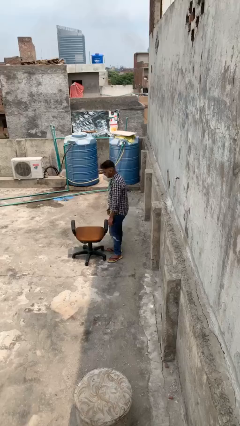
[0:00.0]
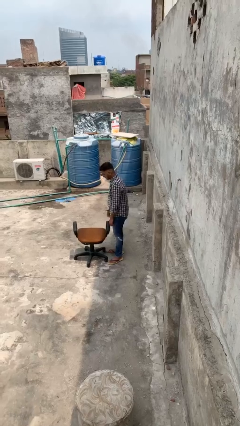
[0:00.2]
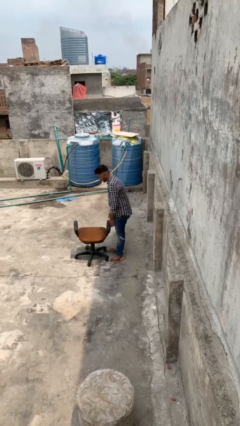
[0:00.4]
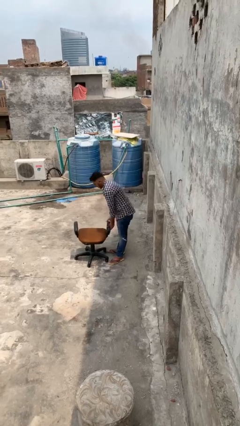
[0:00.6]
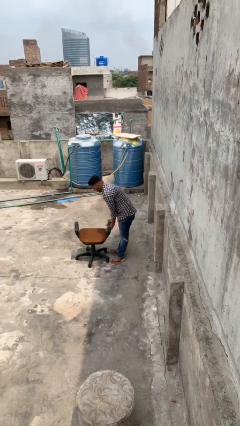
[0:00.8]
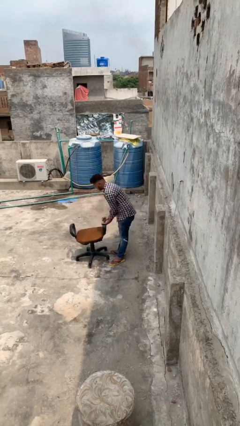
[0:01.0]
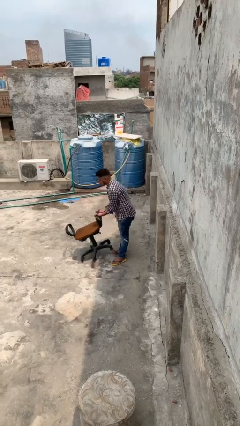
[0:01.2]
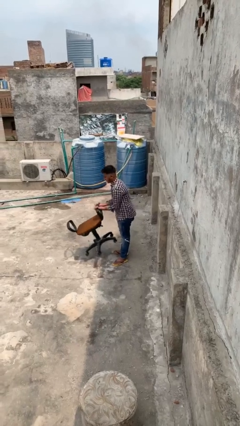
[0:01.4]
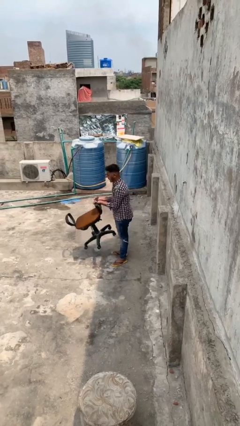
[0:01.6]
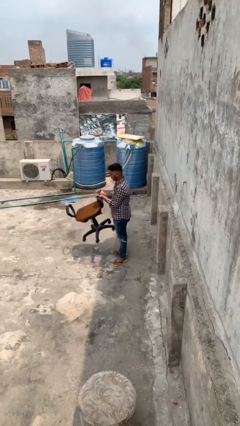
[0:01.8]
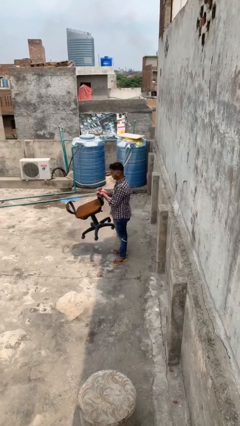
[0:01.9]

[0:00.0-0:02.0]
person picks up object from floor

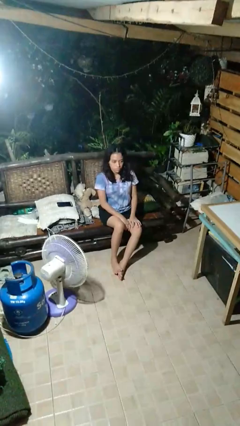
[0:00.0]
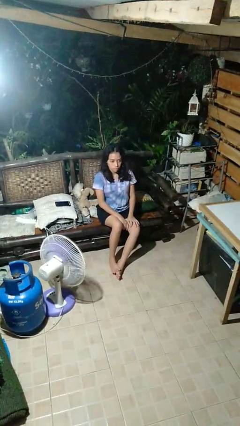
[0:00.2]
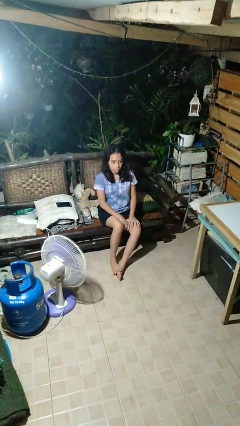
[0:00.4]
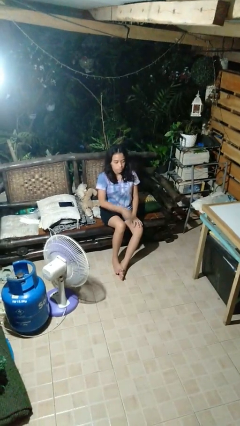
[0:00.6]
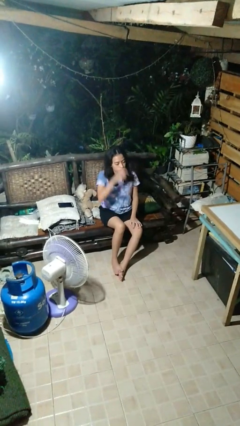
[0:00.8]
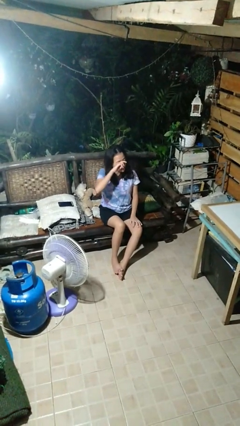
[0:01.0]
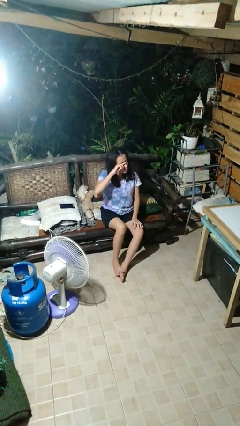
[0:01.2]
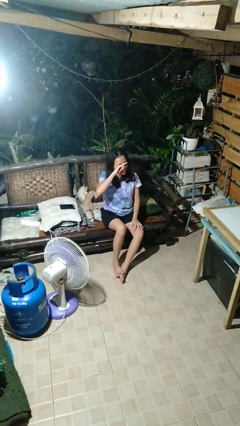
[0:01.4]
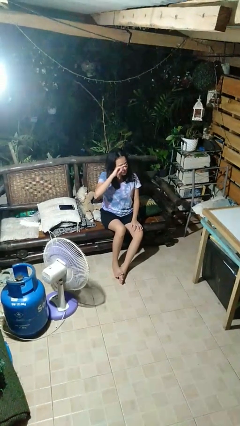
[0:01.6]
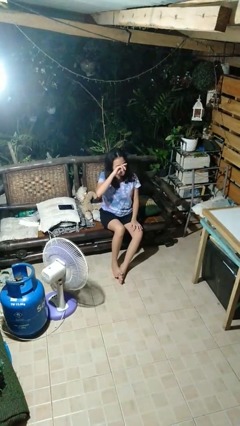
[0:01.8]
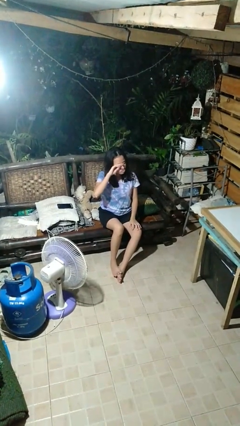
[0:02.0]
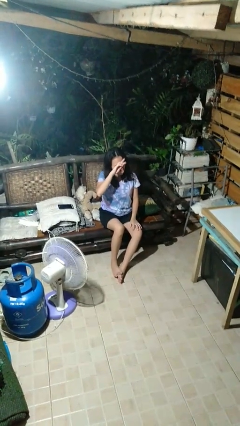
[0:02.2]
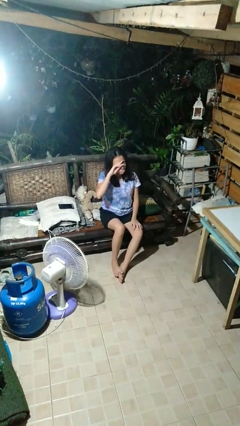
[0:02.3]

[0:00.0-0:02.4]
person rubs eyes

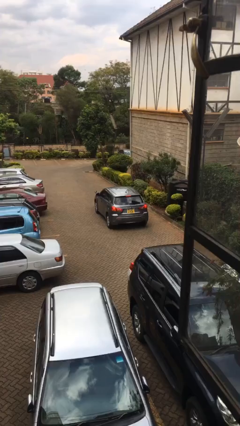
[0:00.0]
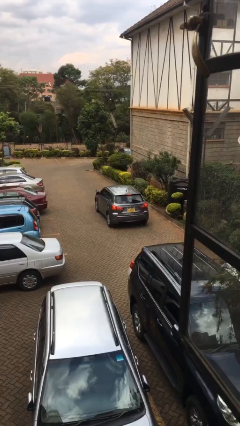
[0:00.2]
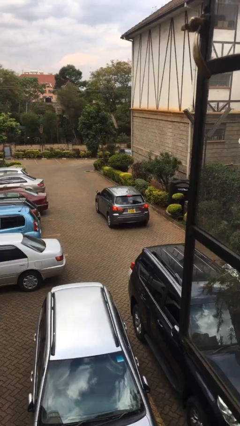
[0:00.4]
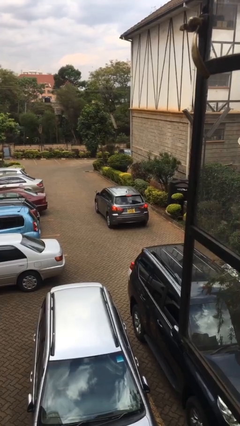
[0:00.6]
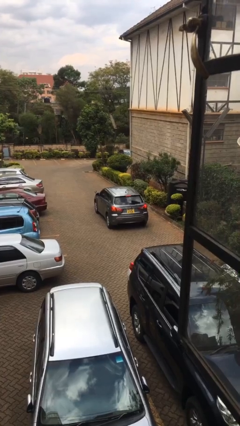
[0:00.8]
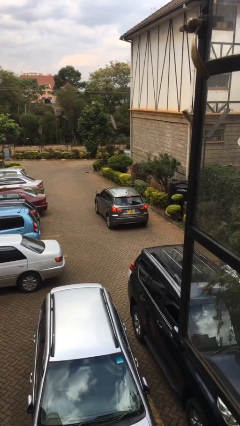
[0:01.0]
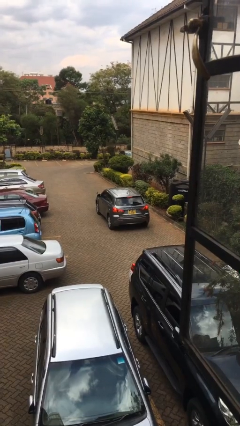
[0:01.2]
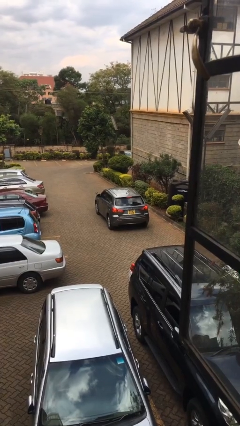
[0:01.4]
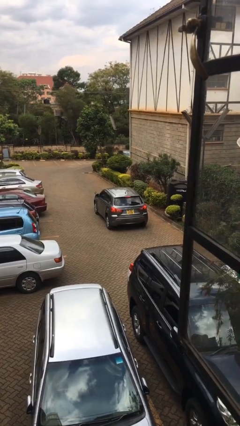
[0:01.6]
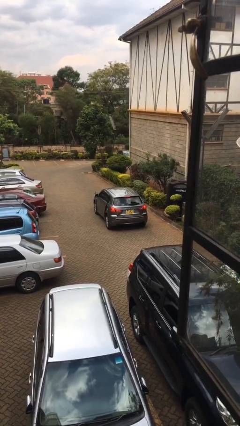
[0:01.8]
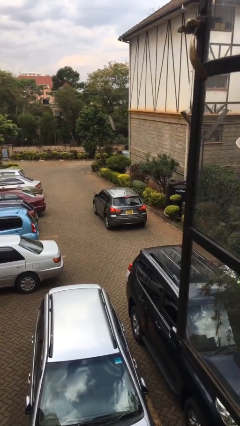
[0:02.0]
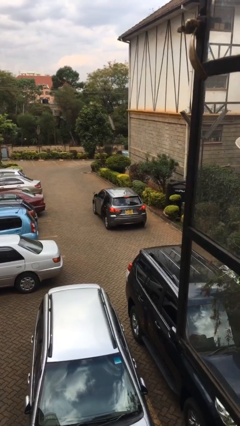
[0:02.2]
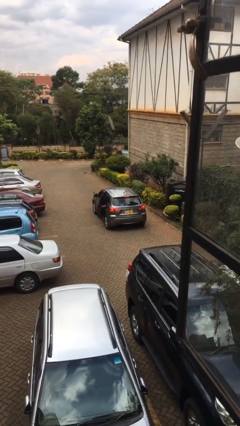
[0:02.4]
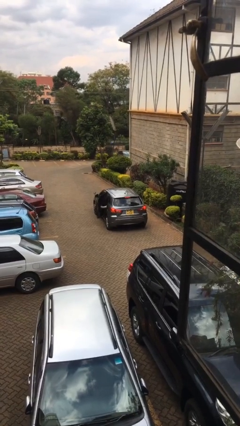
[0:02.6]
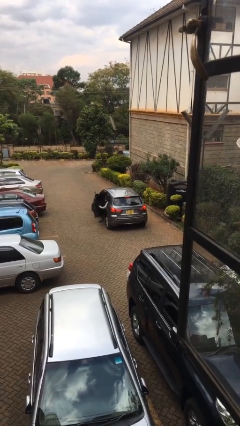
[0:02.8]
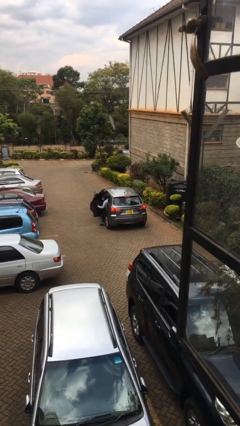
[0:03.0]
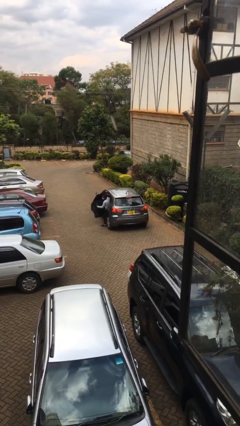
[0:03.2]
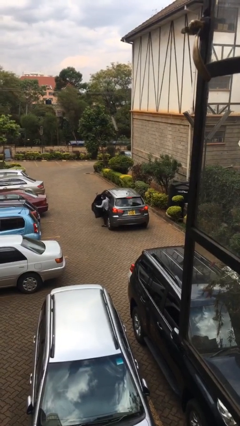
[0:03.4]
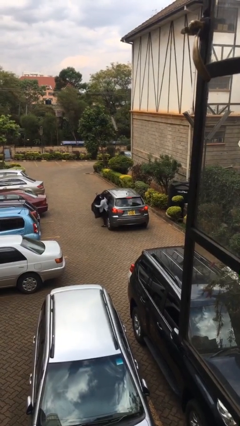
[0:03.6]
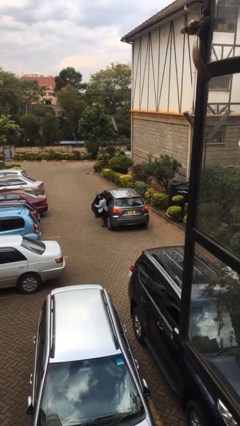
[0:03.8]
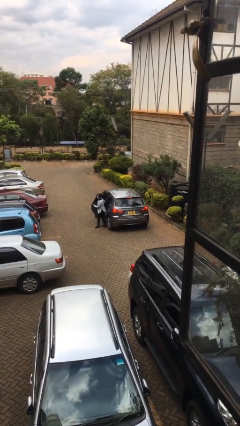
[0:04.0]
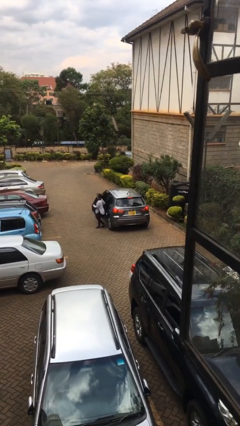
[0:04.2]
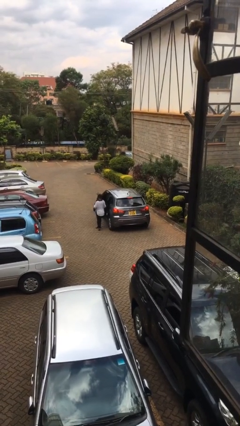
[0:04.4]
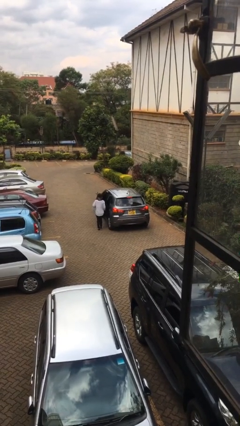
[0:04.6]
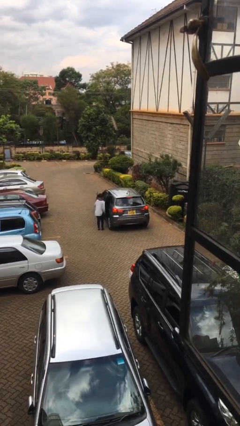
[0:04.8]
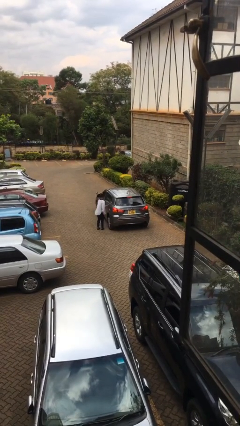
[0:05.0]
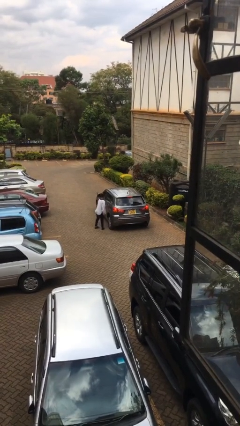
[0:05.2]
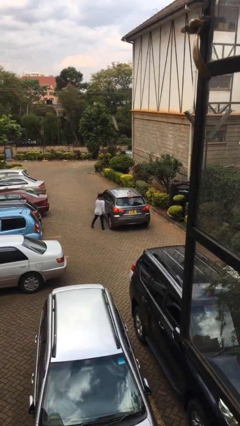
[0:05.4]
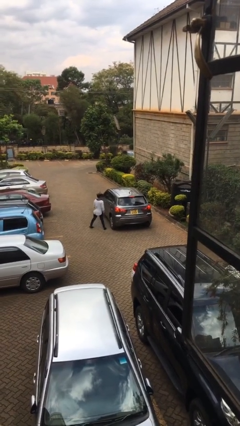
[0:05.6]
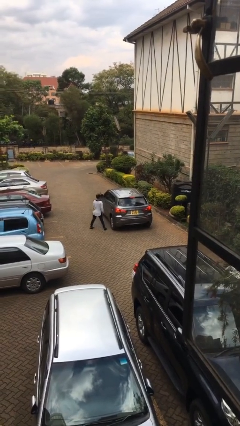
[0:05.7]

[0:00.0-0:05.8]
car drops off person

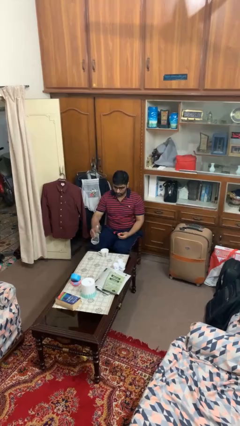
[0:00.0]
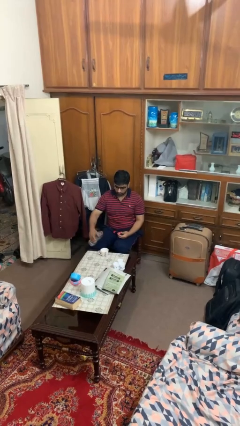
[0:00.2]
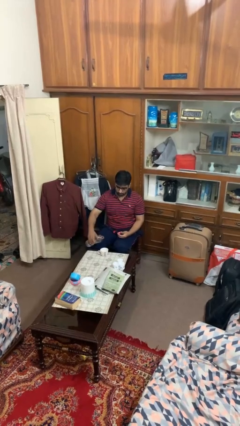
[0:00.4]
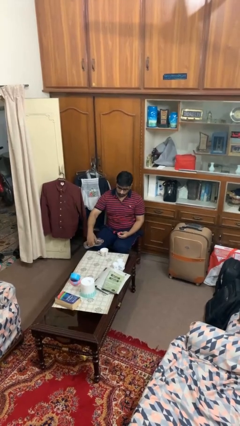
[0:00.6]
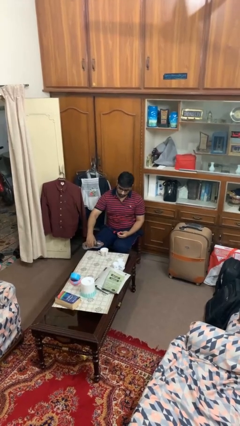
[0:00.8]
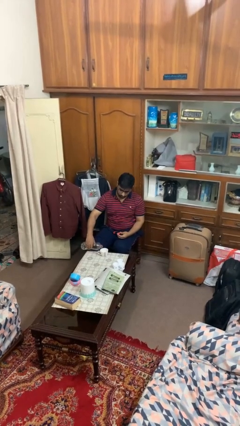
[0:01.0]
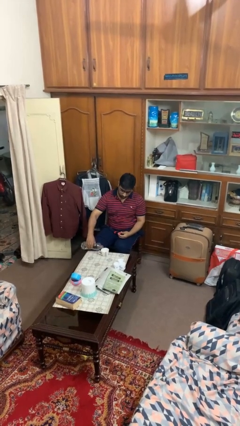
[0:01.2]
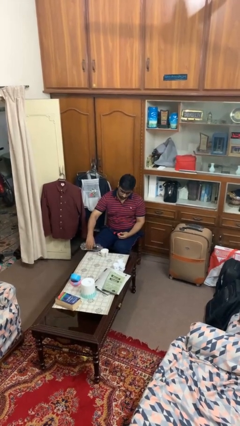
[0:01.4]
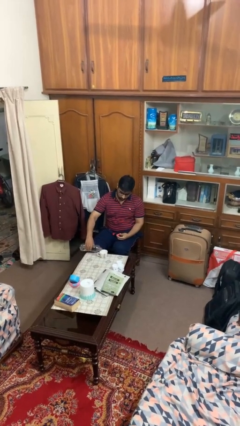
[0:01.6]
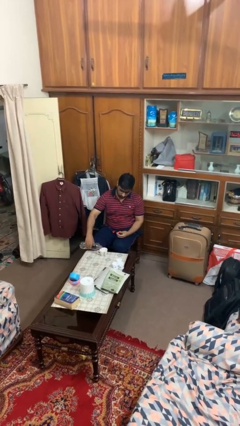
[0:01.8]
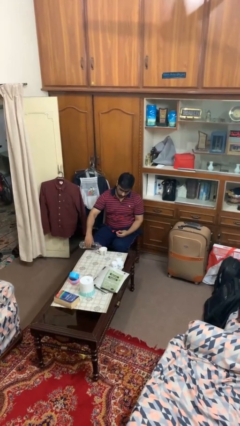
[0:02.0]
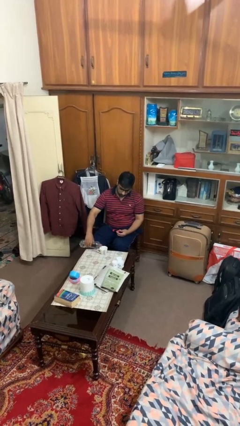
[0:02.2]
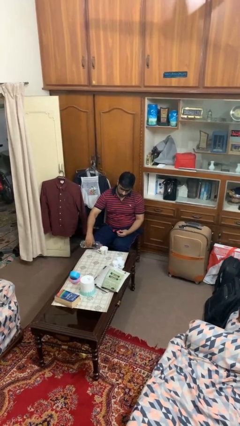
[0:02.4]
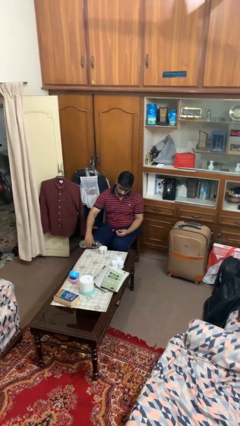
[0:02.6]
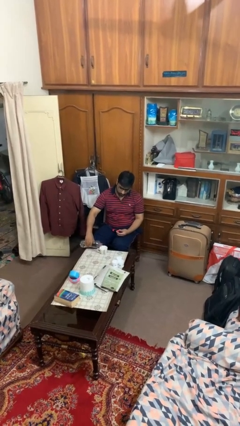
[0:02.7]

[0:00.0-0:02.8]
person pours liquid into cup

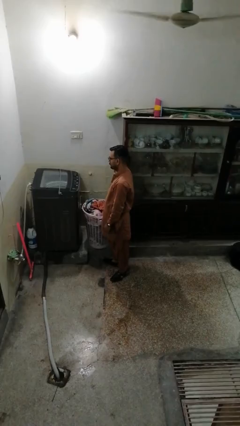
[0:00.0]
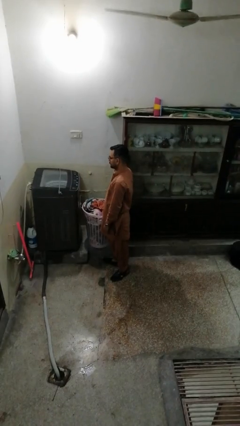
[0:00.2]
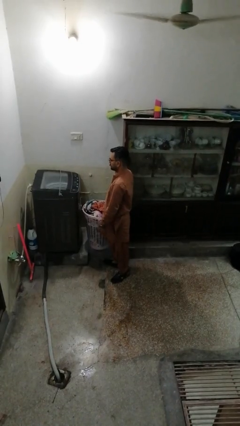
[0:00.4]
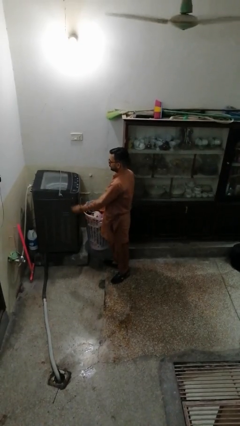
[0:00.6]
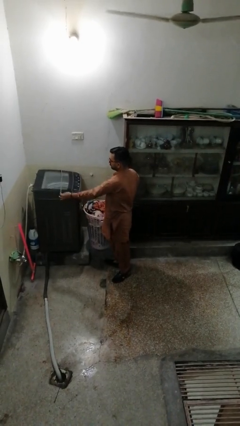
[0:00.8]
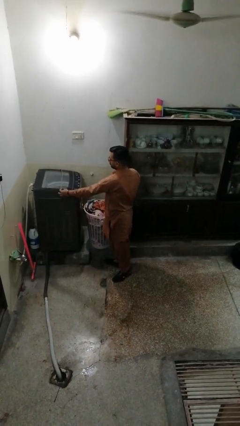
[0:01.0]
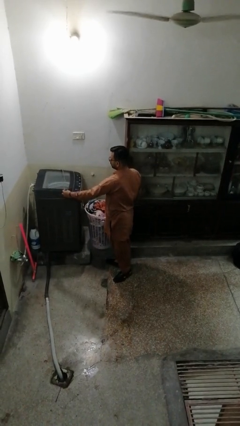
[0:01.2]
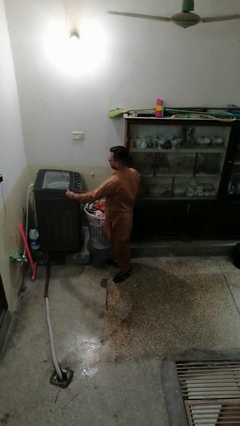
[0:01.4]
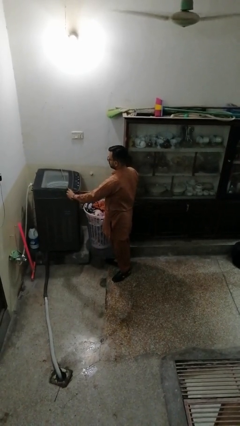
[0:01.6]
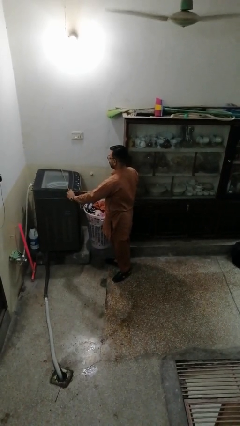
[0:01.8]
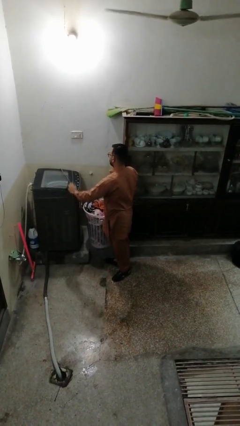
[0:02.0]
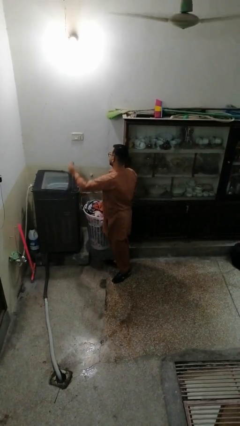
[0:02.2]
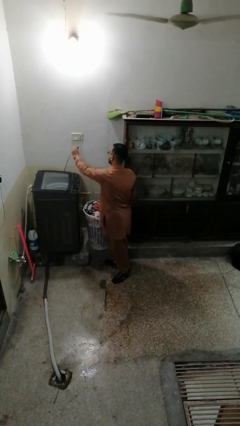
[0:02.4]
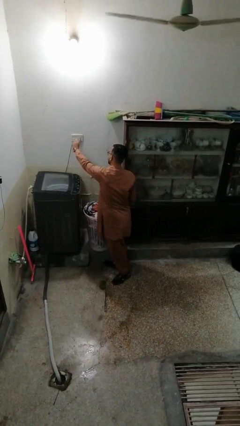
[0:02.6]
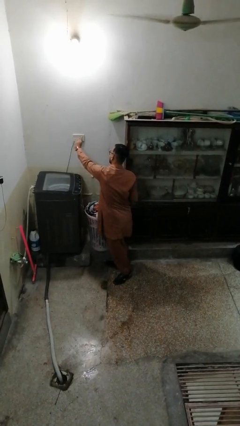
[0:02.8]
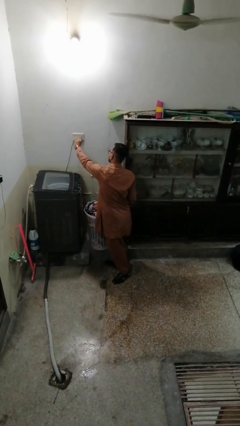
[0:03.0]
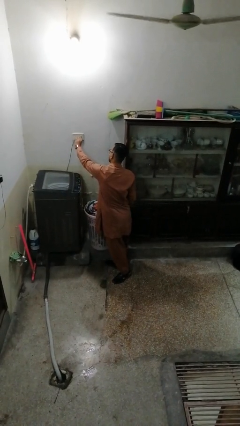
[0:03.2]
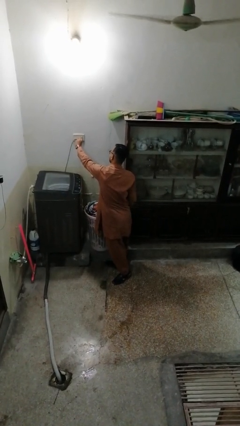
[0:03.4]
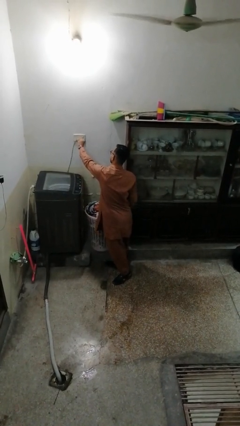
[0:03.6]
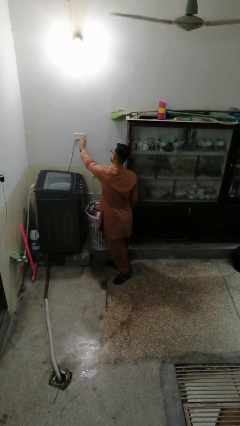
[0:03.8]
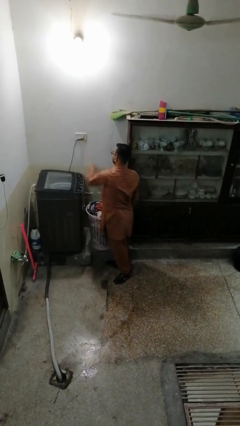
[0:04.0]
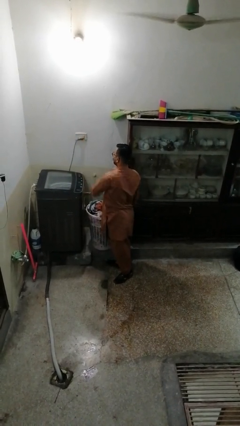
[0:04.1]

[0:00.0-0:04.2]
person plugs into electrical socket

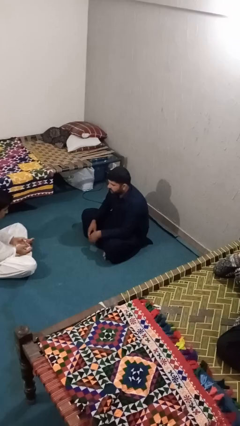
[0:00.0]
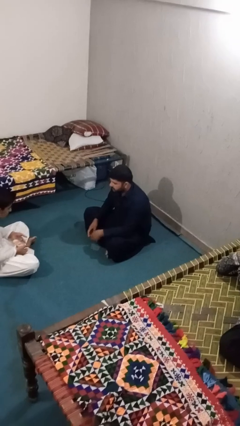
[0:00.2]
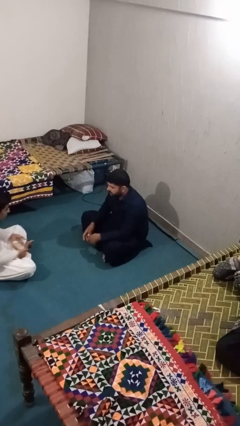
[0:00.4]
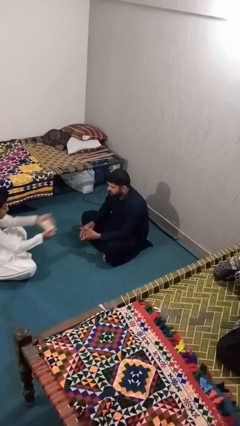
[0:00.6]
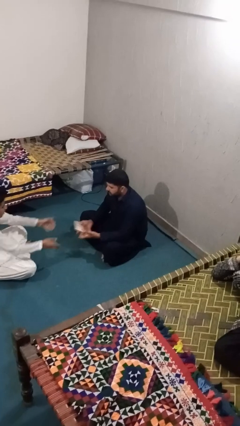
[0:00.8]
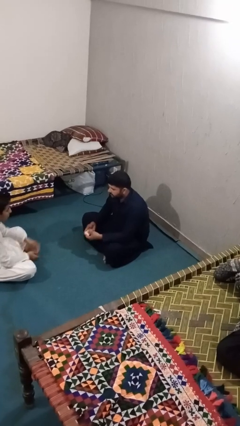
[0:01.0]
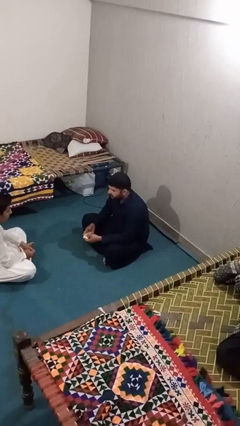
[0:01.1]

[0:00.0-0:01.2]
person catches object from person
